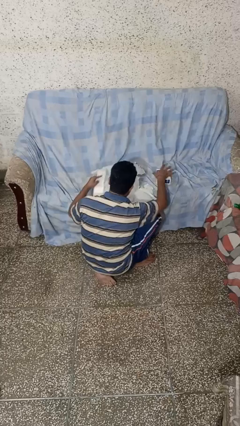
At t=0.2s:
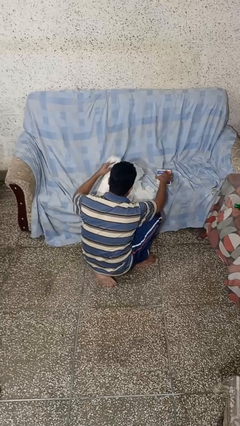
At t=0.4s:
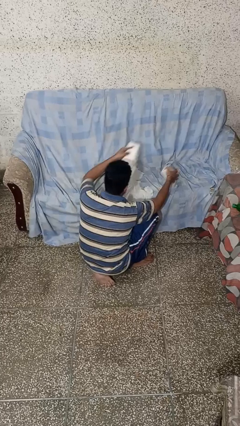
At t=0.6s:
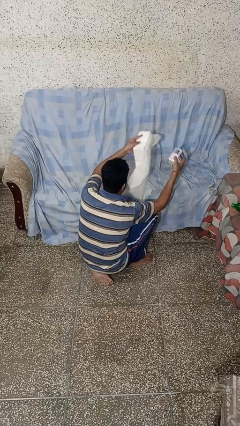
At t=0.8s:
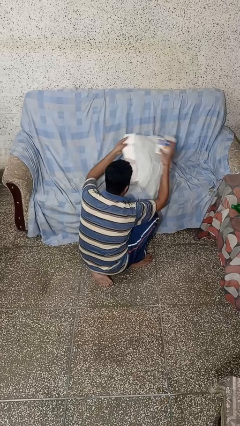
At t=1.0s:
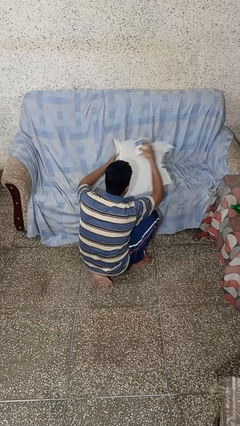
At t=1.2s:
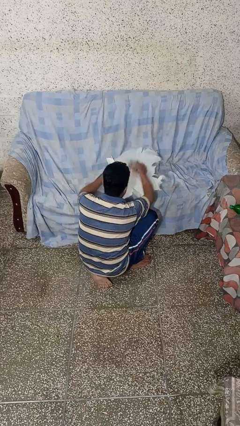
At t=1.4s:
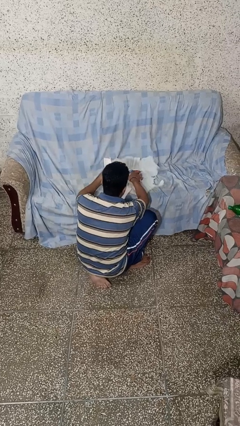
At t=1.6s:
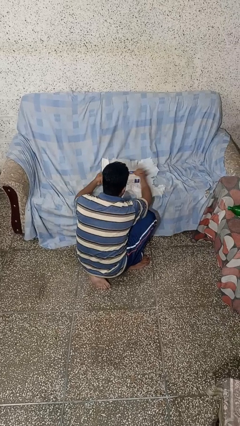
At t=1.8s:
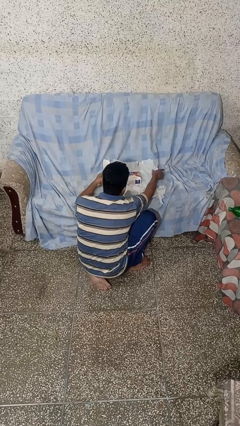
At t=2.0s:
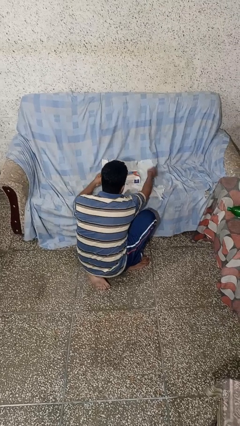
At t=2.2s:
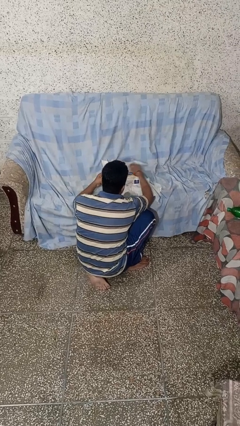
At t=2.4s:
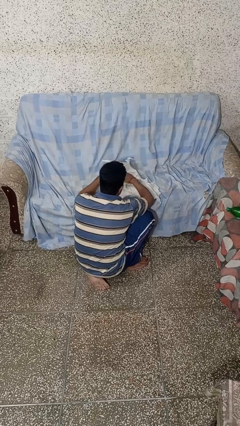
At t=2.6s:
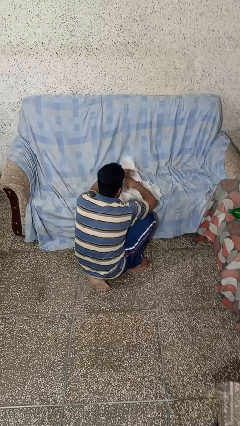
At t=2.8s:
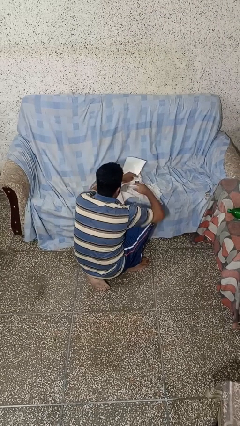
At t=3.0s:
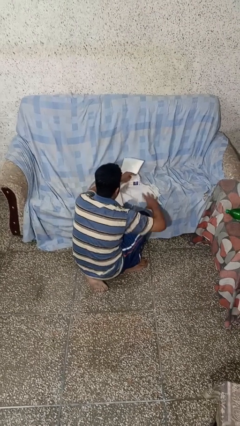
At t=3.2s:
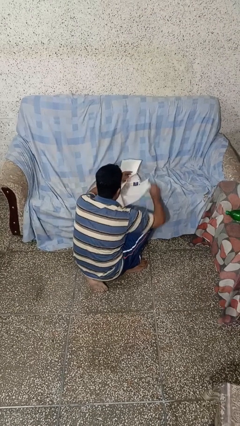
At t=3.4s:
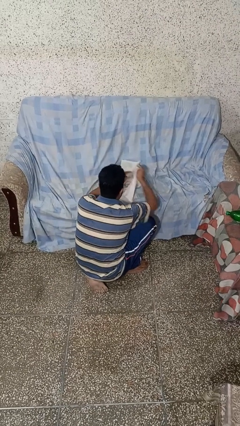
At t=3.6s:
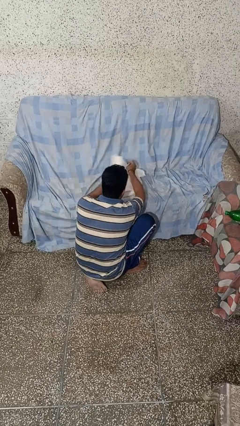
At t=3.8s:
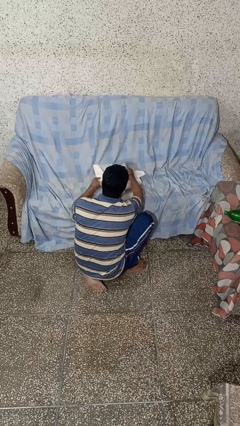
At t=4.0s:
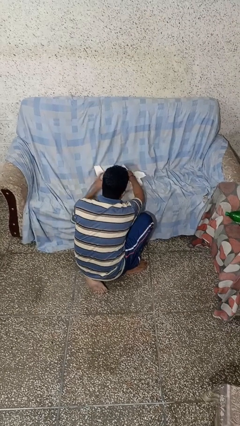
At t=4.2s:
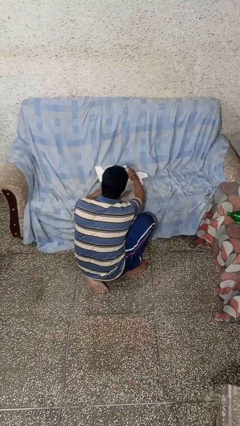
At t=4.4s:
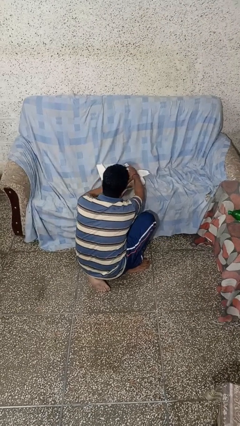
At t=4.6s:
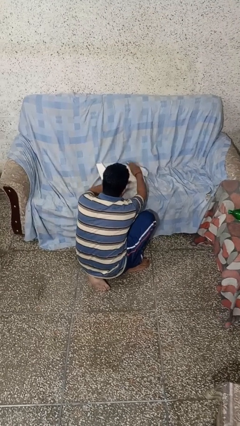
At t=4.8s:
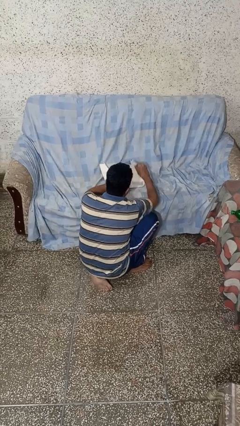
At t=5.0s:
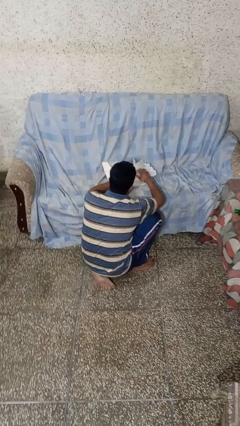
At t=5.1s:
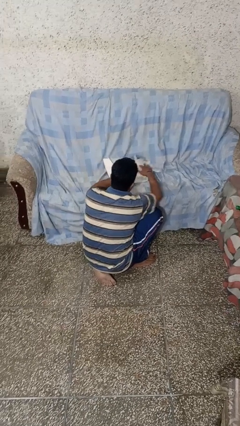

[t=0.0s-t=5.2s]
person wraps box

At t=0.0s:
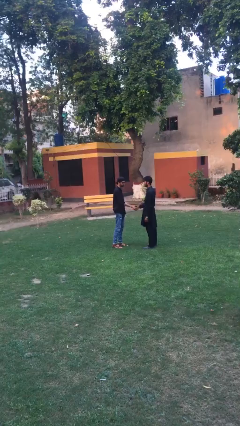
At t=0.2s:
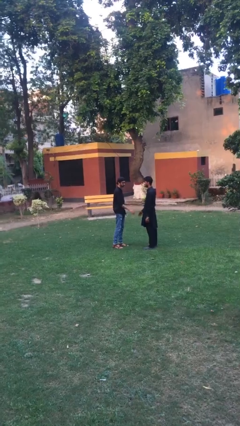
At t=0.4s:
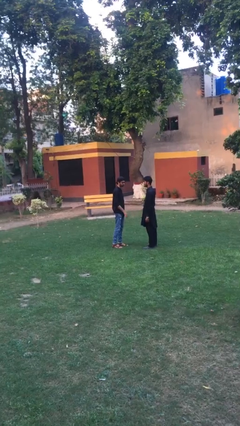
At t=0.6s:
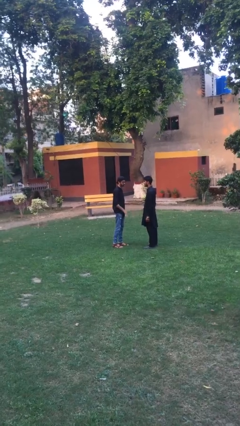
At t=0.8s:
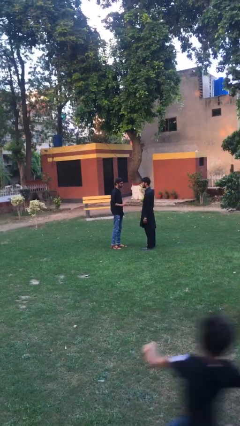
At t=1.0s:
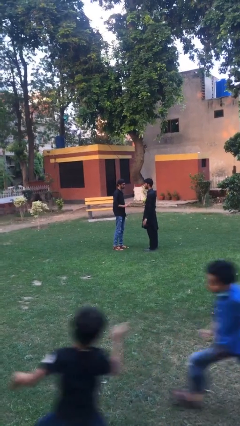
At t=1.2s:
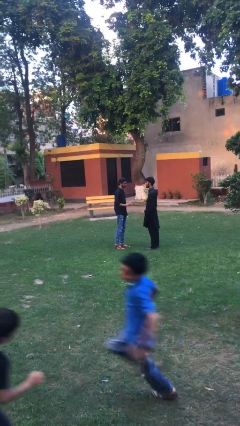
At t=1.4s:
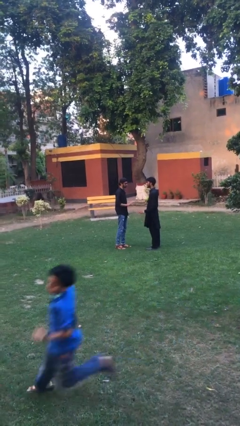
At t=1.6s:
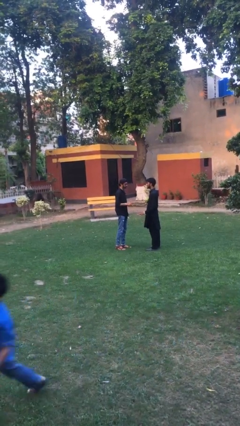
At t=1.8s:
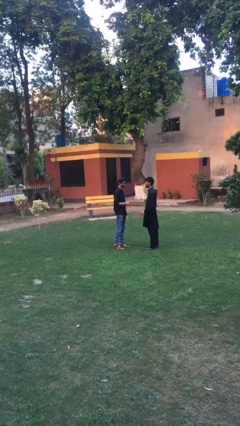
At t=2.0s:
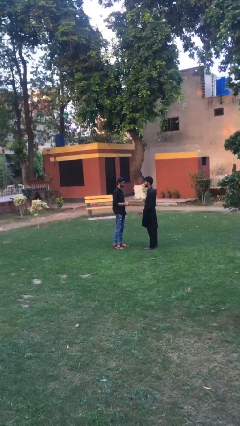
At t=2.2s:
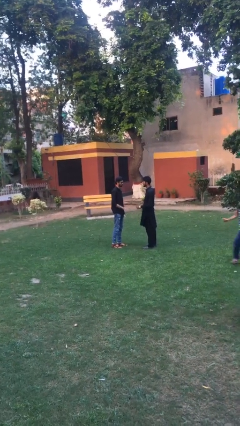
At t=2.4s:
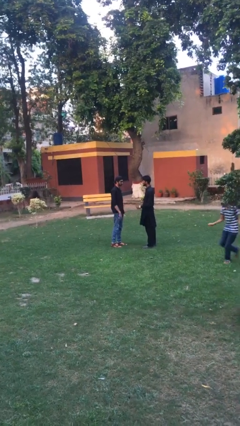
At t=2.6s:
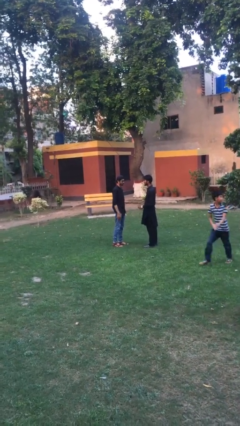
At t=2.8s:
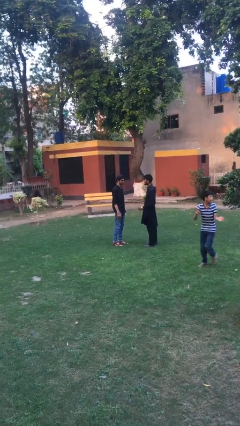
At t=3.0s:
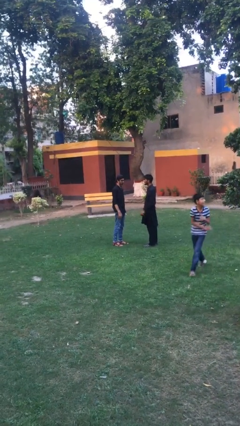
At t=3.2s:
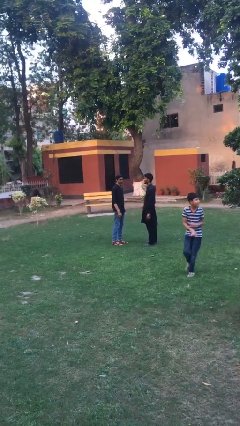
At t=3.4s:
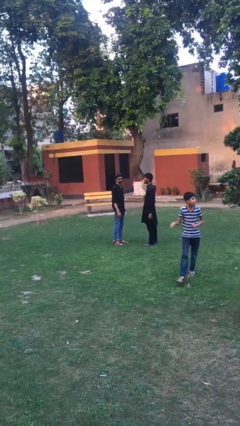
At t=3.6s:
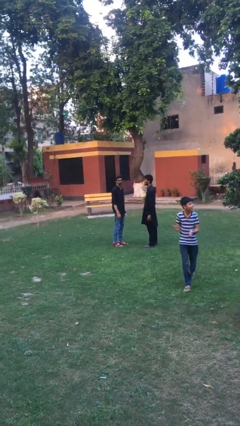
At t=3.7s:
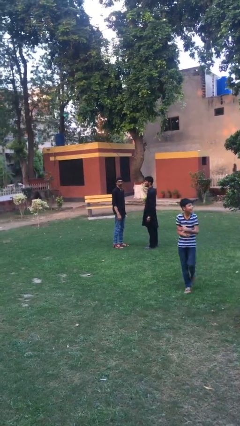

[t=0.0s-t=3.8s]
person talks to person

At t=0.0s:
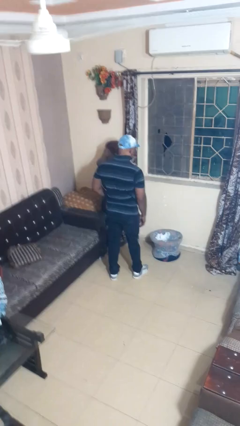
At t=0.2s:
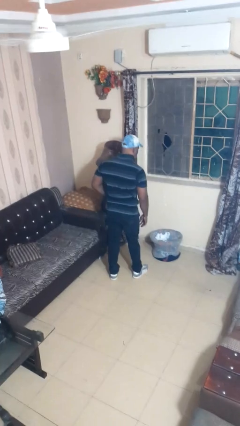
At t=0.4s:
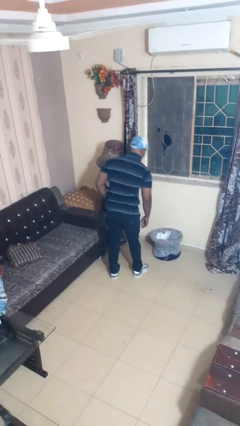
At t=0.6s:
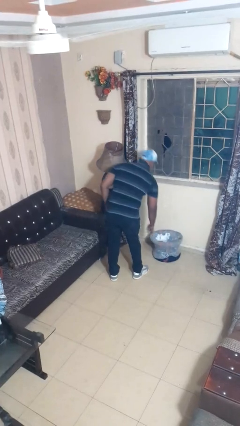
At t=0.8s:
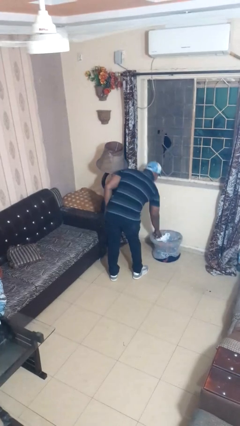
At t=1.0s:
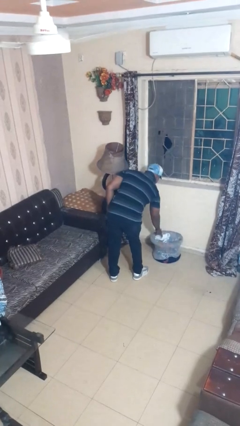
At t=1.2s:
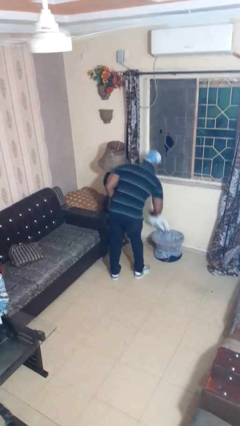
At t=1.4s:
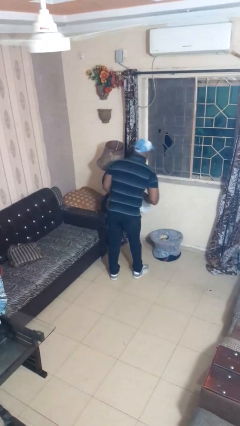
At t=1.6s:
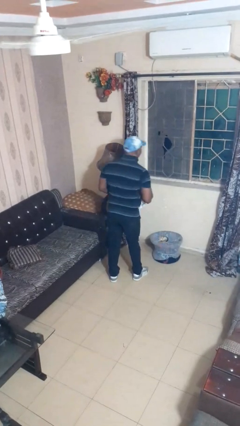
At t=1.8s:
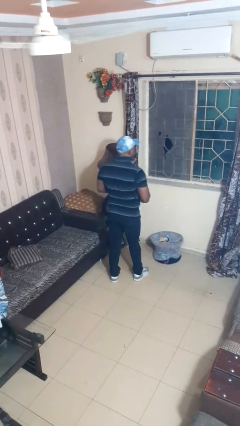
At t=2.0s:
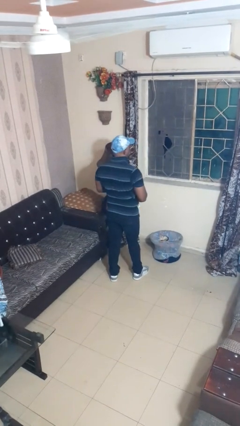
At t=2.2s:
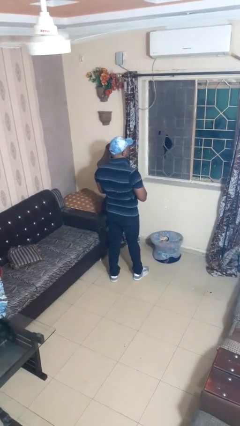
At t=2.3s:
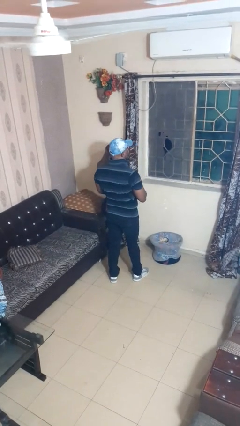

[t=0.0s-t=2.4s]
person takes object from basket

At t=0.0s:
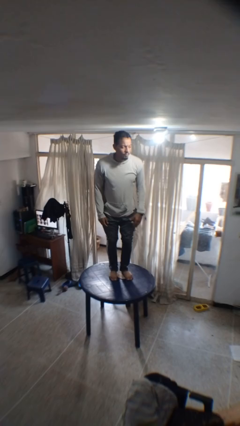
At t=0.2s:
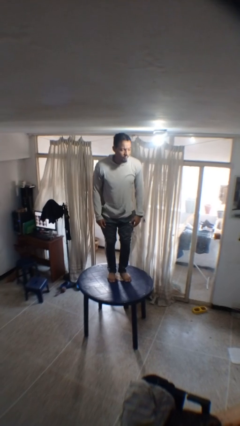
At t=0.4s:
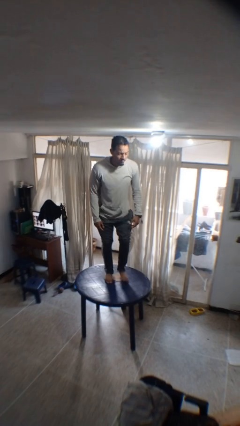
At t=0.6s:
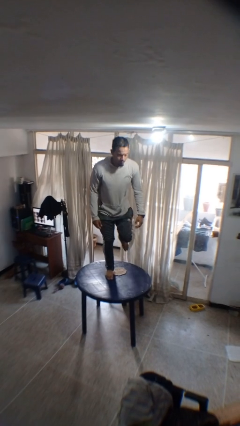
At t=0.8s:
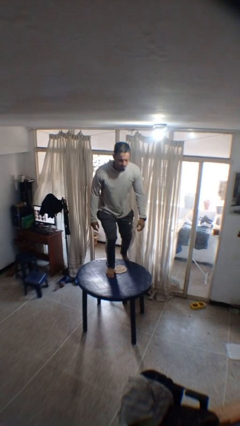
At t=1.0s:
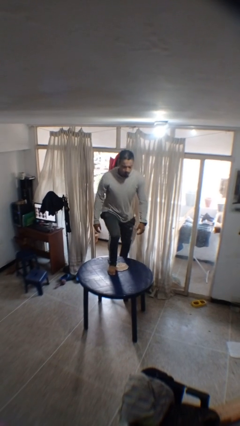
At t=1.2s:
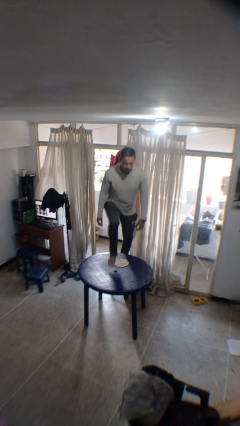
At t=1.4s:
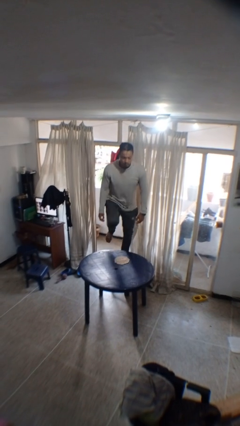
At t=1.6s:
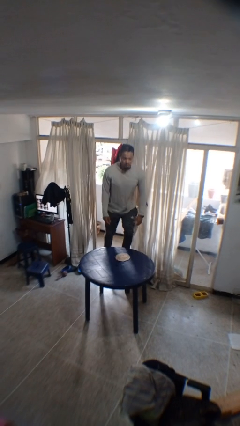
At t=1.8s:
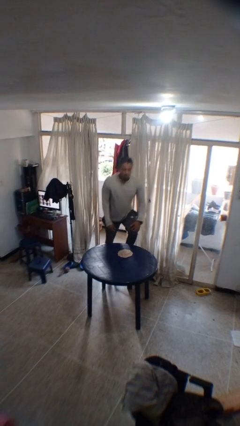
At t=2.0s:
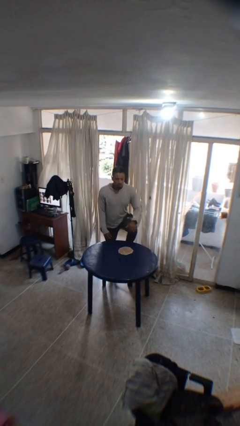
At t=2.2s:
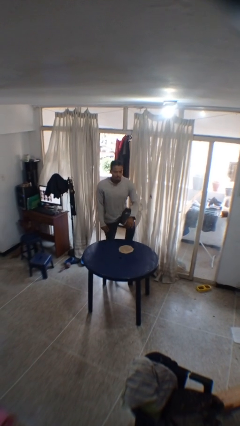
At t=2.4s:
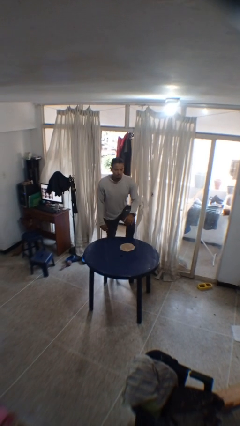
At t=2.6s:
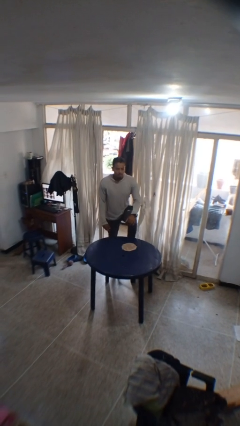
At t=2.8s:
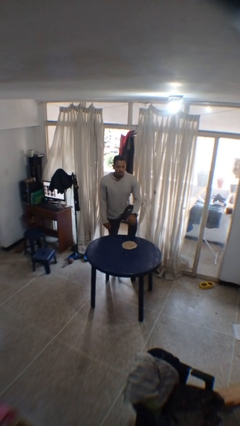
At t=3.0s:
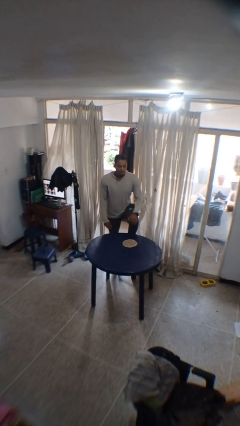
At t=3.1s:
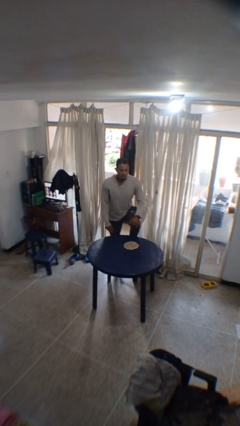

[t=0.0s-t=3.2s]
person climbs off table

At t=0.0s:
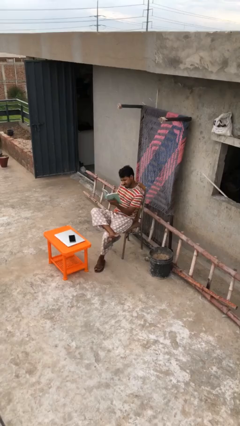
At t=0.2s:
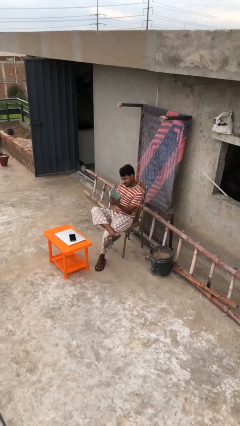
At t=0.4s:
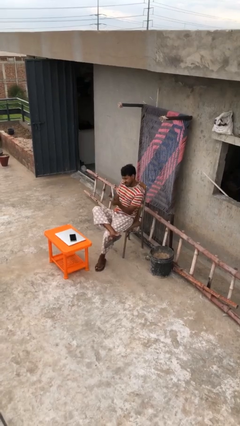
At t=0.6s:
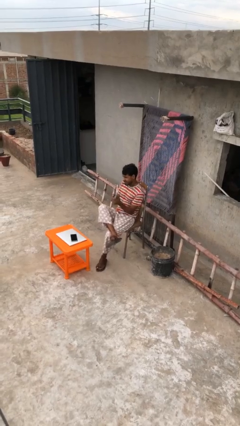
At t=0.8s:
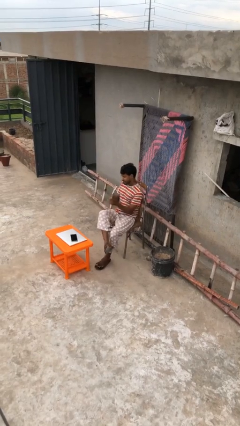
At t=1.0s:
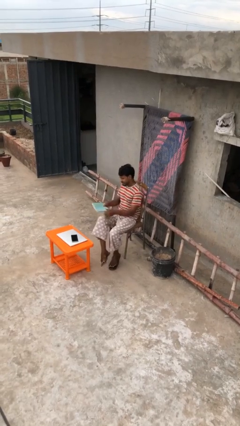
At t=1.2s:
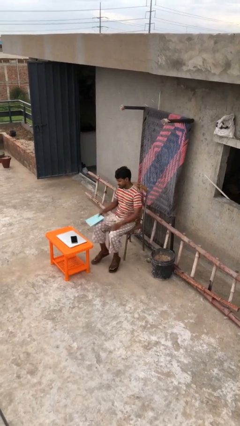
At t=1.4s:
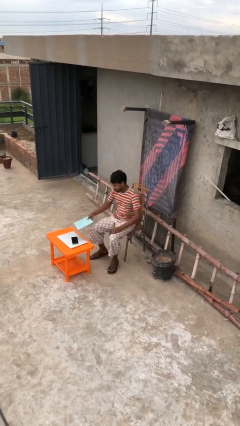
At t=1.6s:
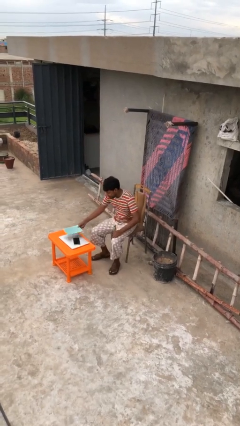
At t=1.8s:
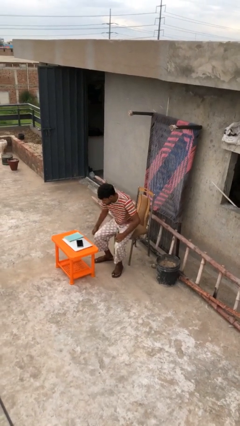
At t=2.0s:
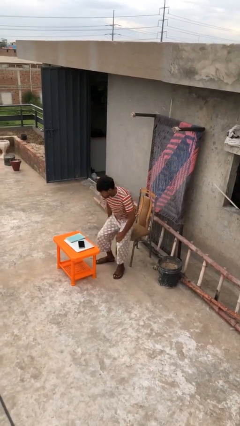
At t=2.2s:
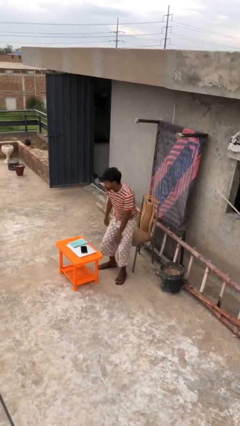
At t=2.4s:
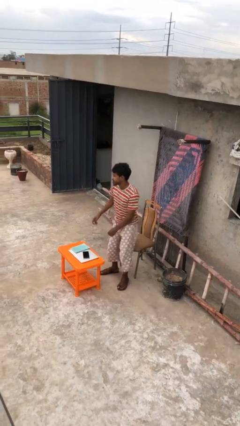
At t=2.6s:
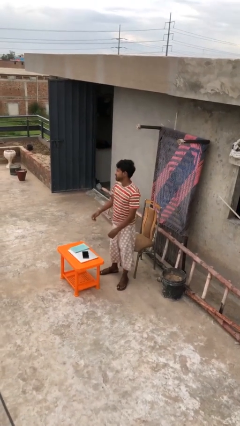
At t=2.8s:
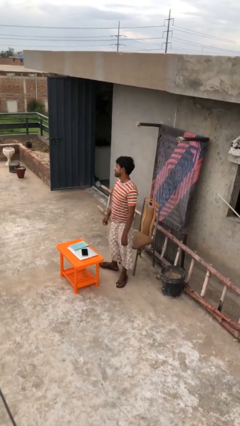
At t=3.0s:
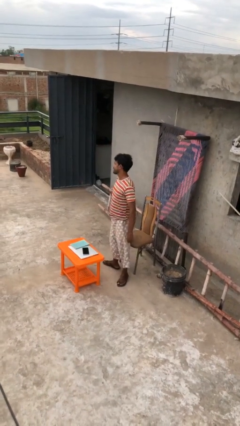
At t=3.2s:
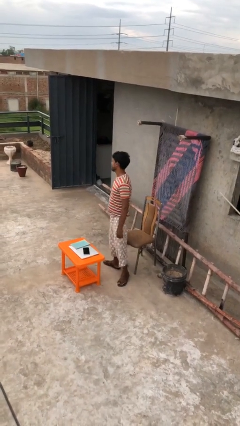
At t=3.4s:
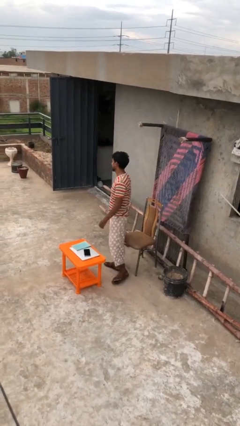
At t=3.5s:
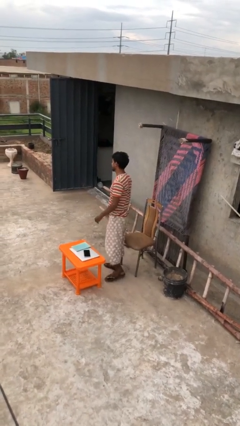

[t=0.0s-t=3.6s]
person stands up
